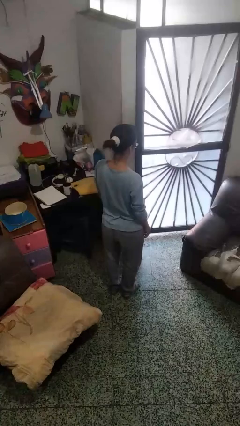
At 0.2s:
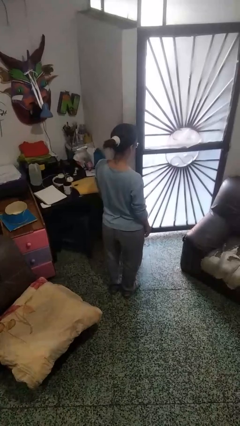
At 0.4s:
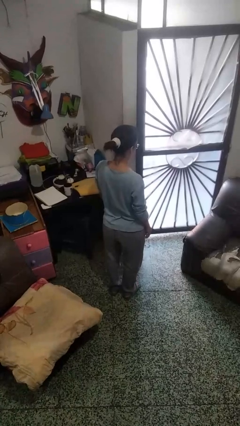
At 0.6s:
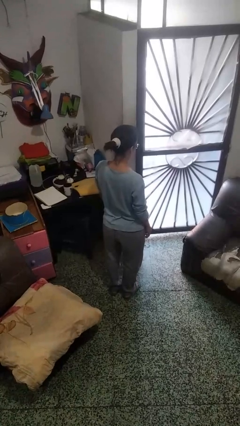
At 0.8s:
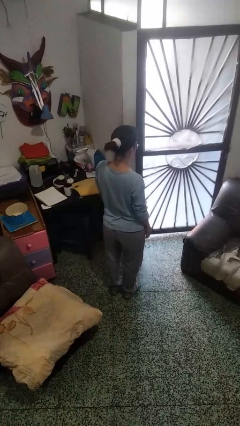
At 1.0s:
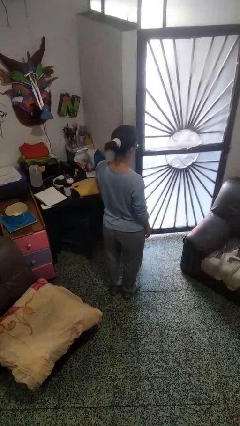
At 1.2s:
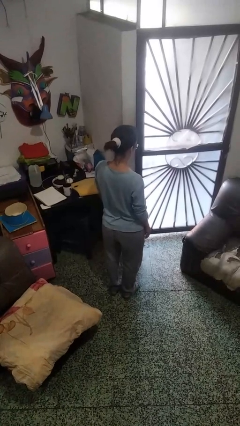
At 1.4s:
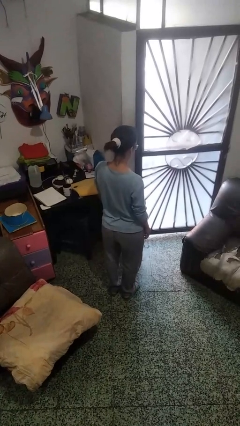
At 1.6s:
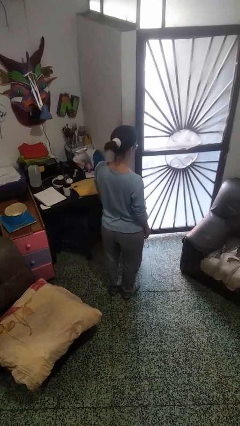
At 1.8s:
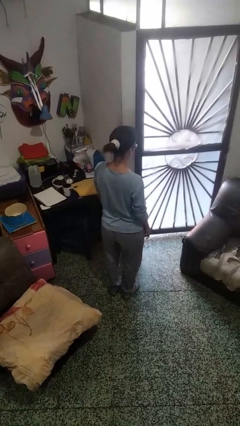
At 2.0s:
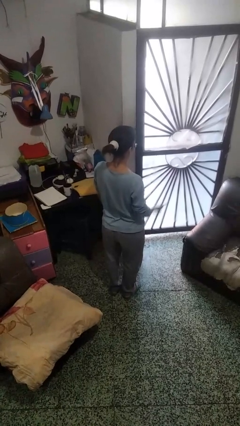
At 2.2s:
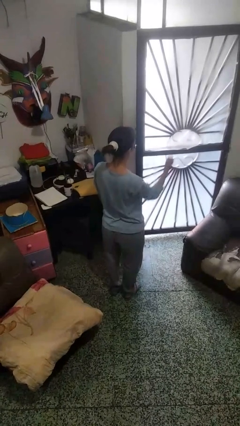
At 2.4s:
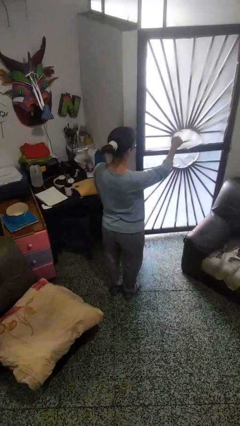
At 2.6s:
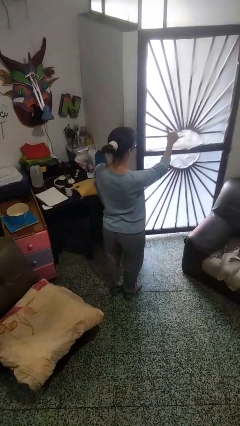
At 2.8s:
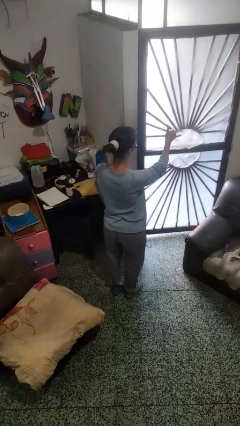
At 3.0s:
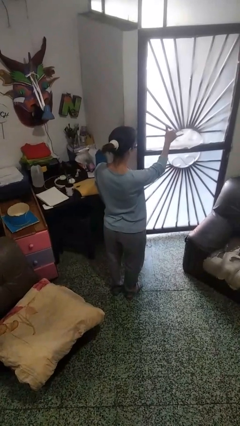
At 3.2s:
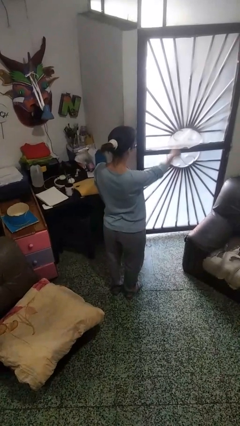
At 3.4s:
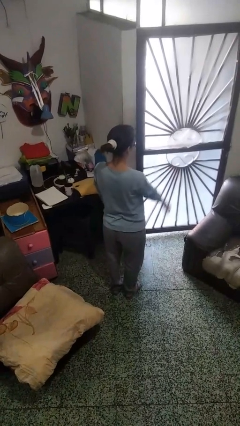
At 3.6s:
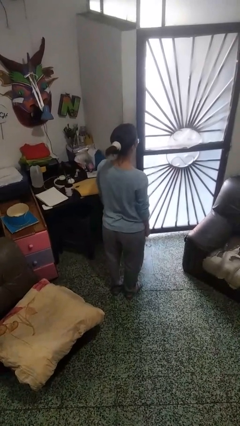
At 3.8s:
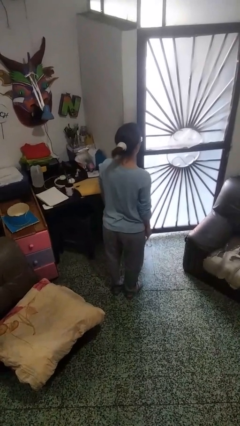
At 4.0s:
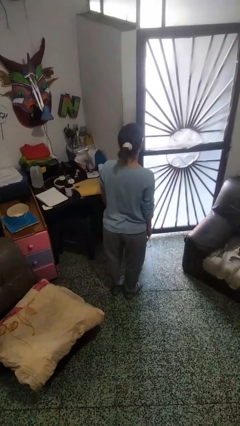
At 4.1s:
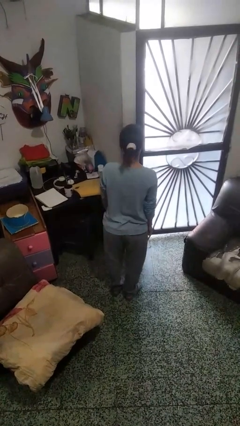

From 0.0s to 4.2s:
person gestures hang loose

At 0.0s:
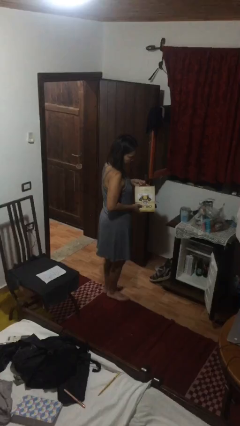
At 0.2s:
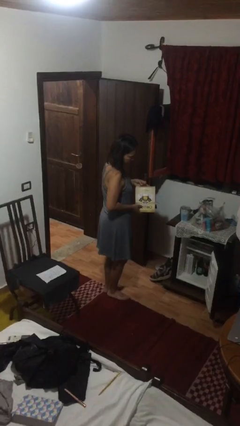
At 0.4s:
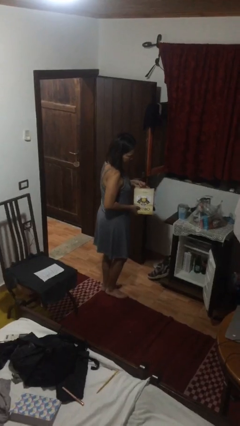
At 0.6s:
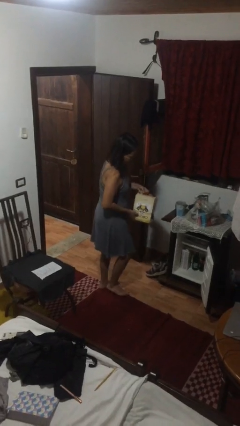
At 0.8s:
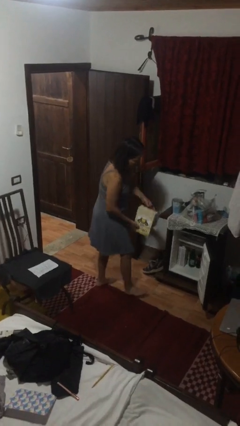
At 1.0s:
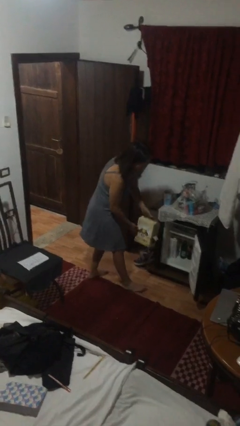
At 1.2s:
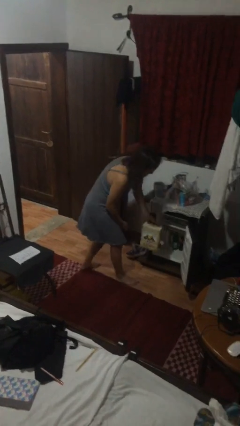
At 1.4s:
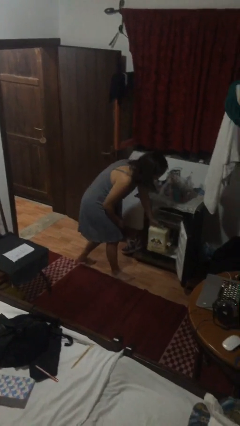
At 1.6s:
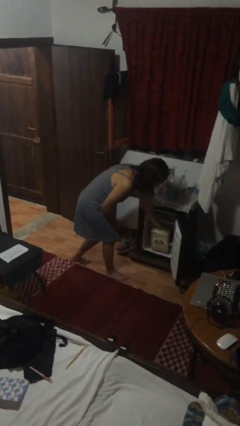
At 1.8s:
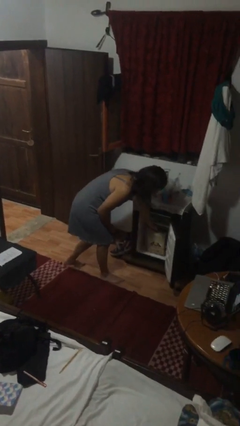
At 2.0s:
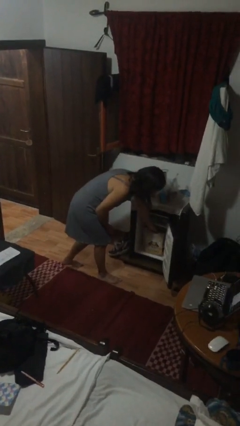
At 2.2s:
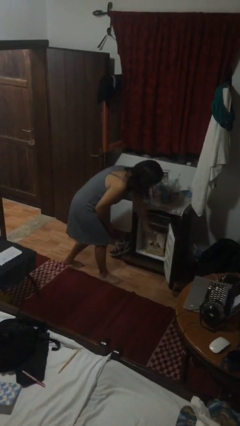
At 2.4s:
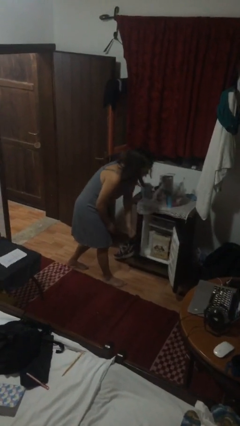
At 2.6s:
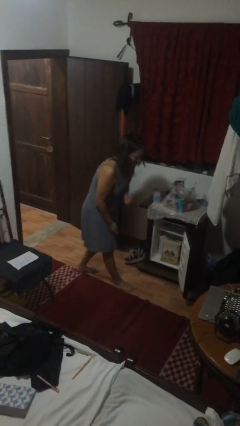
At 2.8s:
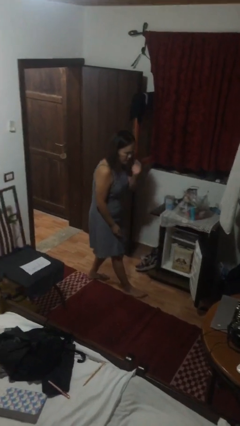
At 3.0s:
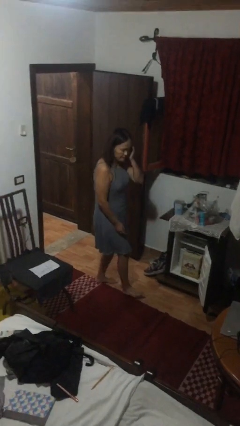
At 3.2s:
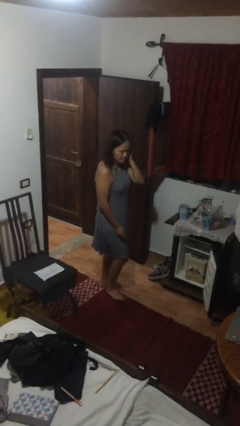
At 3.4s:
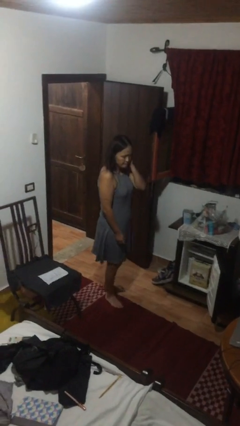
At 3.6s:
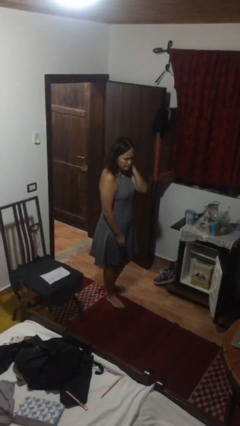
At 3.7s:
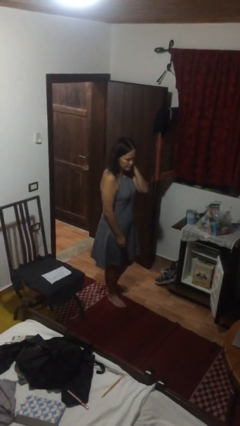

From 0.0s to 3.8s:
person puts down object into cabinet

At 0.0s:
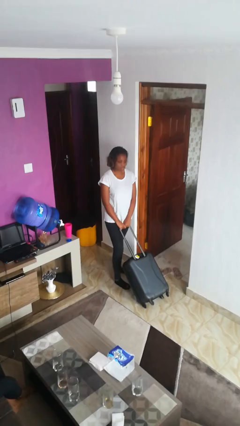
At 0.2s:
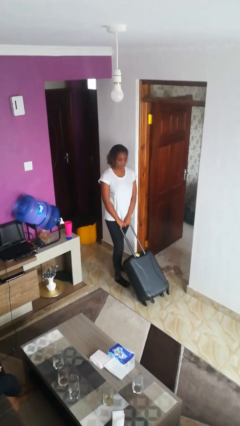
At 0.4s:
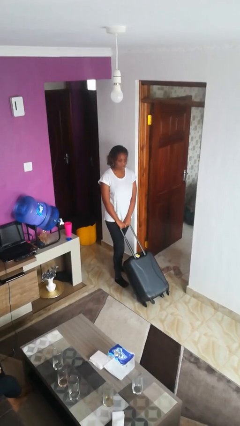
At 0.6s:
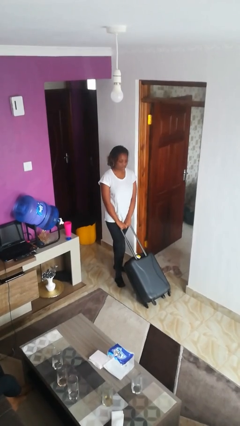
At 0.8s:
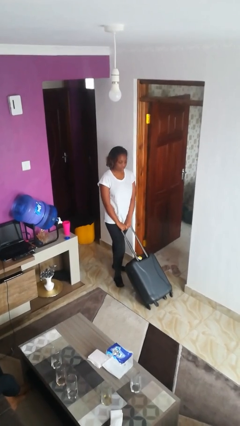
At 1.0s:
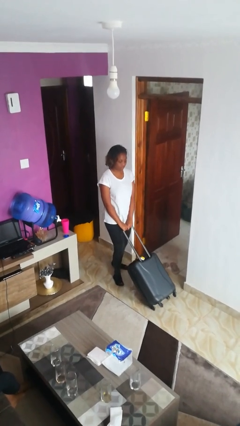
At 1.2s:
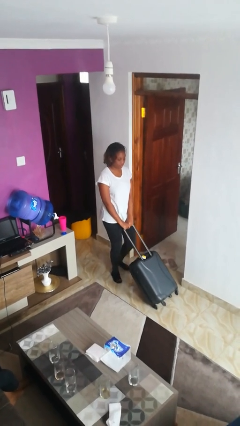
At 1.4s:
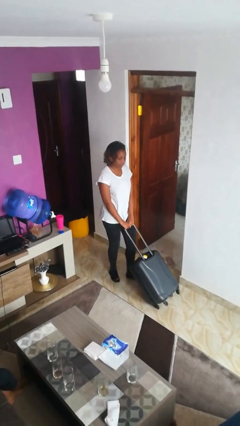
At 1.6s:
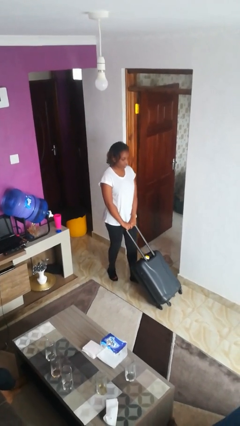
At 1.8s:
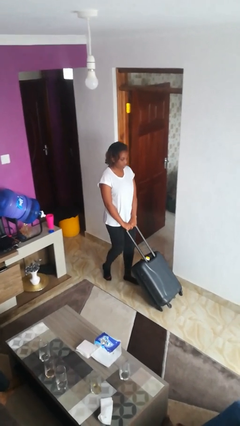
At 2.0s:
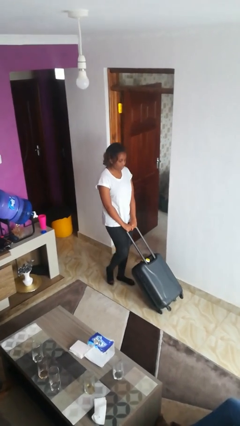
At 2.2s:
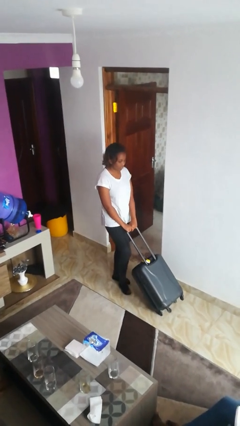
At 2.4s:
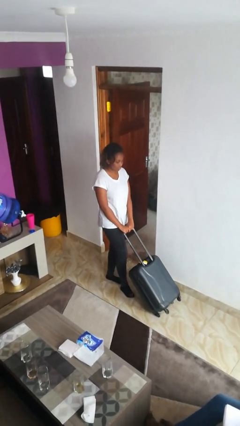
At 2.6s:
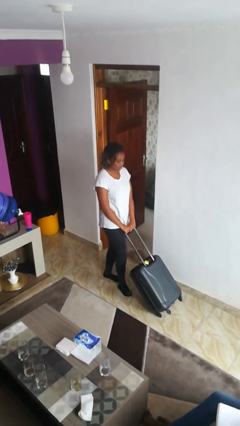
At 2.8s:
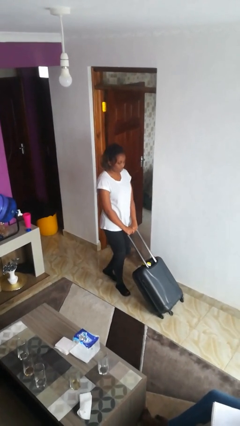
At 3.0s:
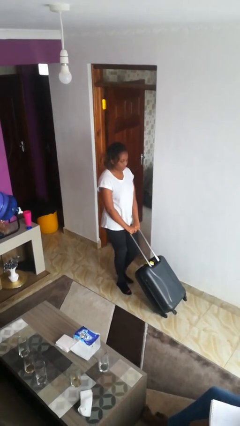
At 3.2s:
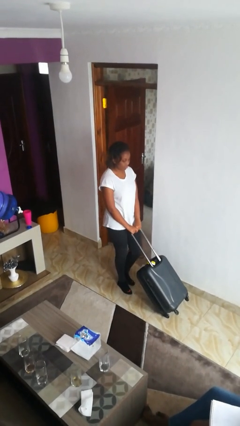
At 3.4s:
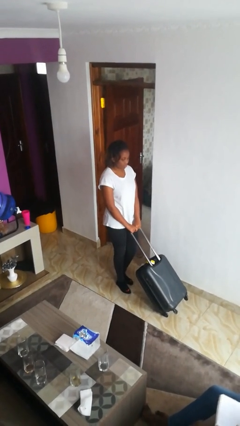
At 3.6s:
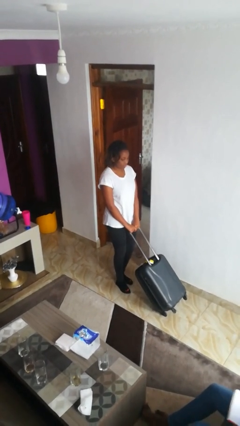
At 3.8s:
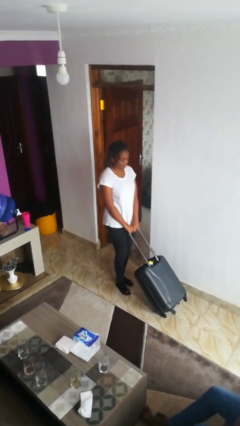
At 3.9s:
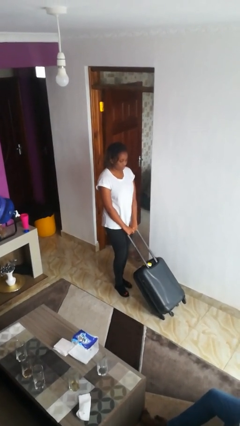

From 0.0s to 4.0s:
person pushes wheeled cart

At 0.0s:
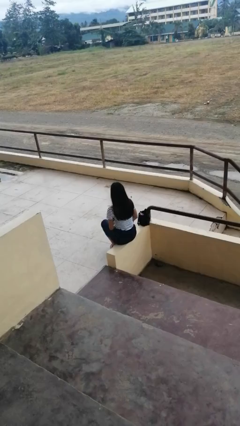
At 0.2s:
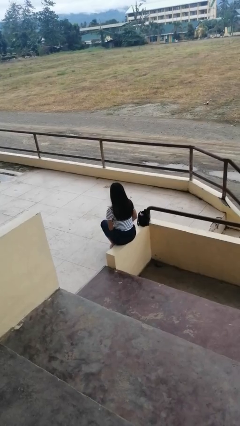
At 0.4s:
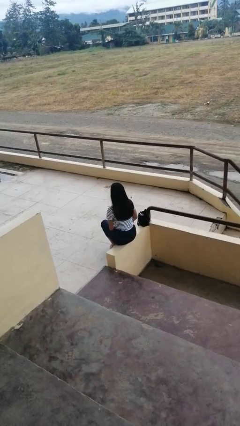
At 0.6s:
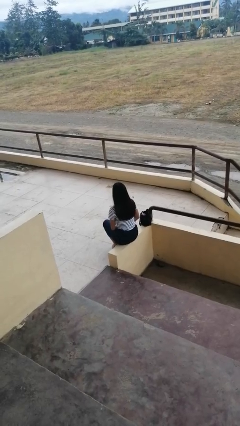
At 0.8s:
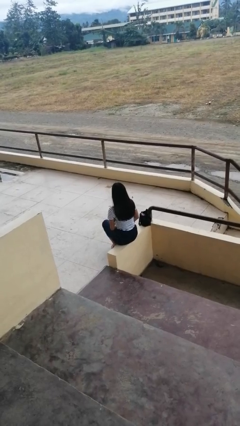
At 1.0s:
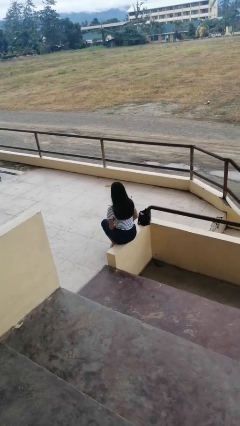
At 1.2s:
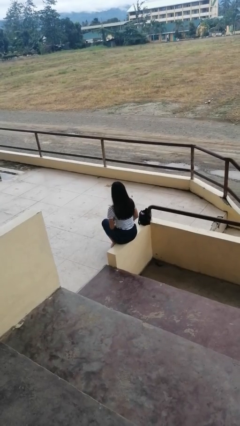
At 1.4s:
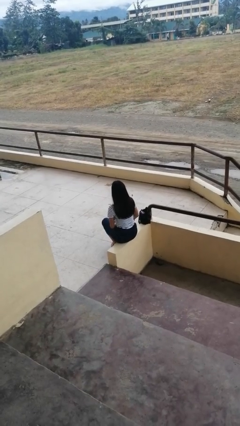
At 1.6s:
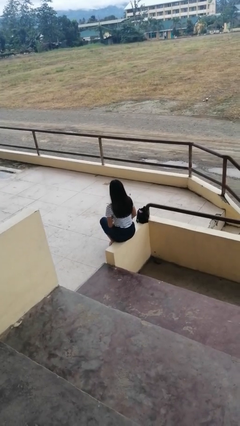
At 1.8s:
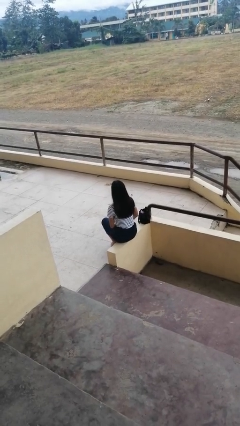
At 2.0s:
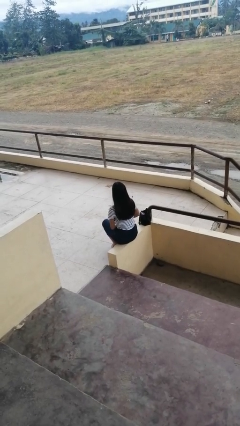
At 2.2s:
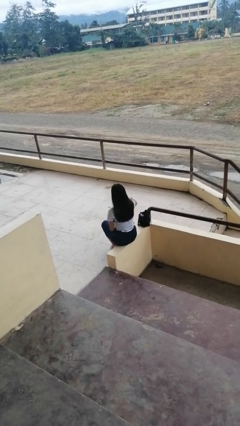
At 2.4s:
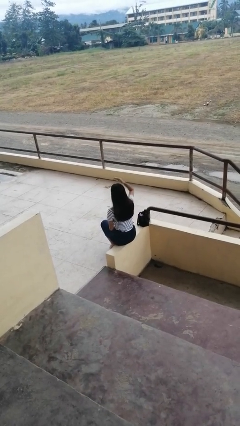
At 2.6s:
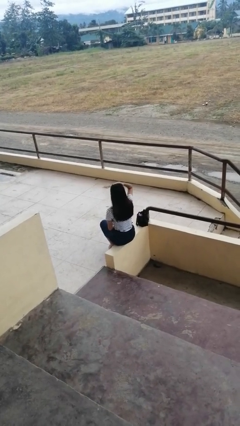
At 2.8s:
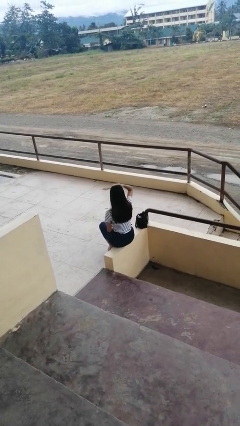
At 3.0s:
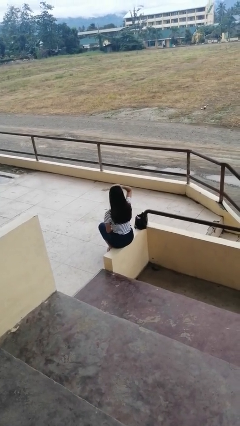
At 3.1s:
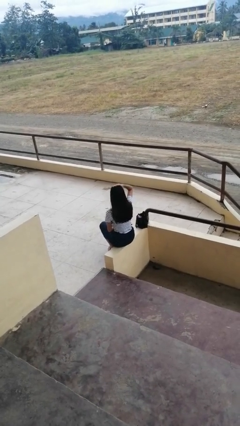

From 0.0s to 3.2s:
person pats head

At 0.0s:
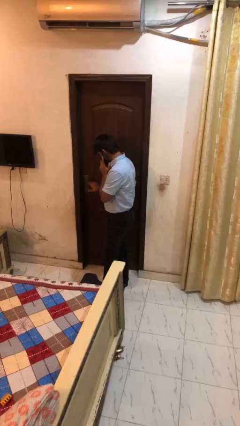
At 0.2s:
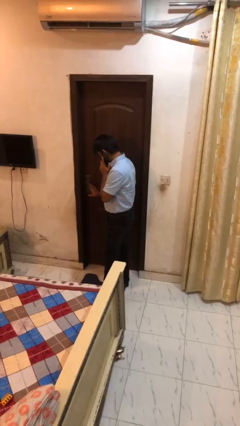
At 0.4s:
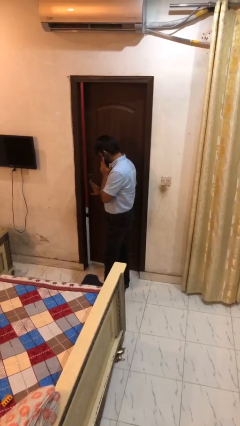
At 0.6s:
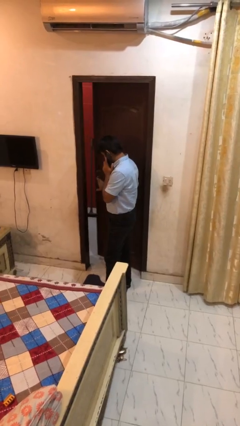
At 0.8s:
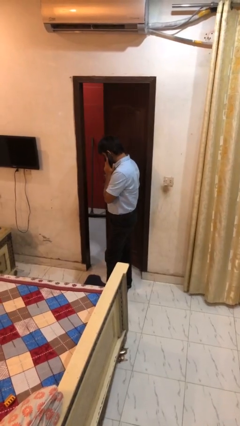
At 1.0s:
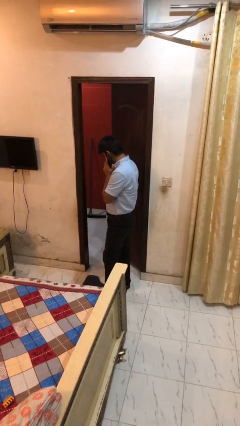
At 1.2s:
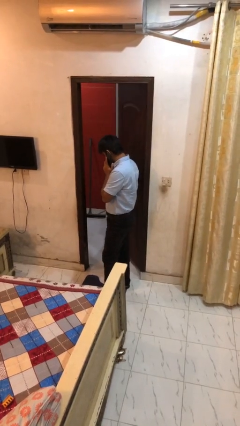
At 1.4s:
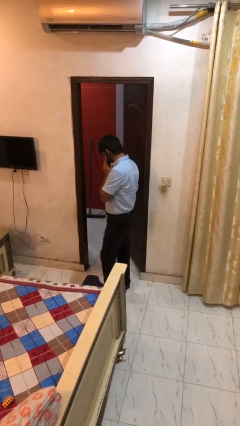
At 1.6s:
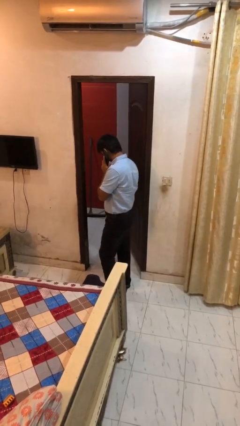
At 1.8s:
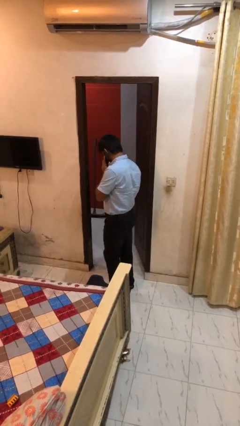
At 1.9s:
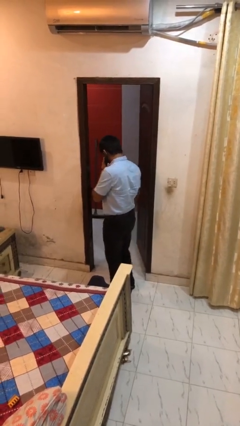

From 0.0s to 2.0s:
person opens facility door

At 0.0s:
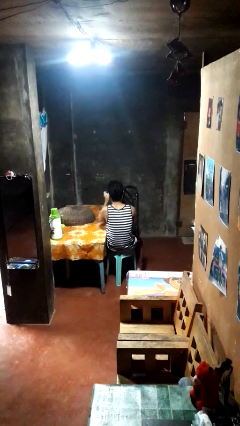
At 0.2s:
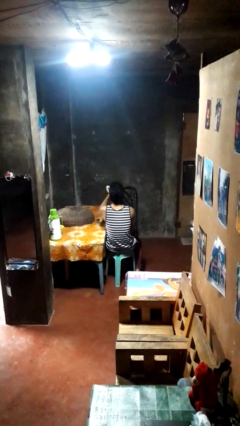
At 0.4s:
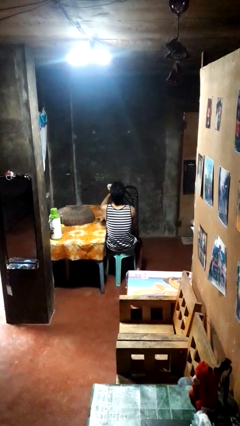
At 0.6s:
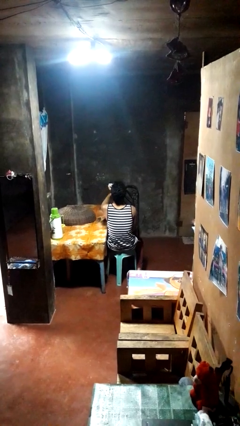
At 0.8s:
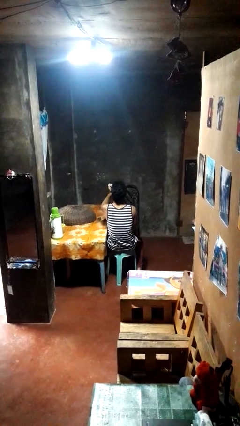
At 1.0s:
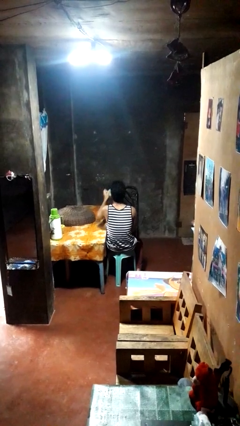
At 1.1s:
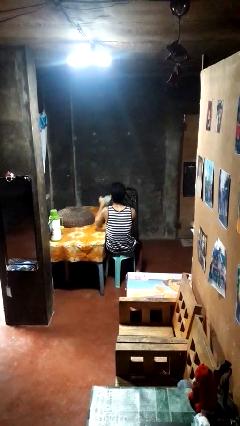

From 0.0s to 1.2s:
person drinks from mug
